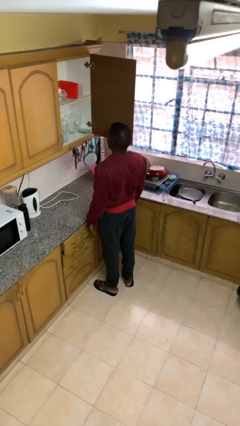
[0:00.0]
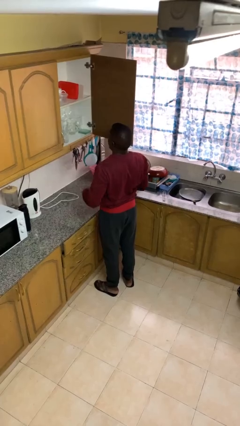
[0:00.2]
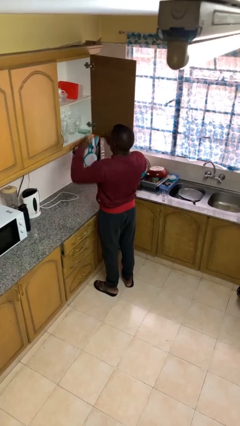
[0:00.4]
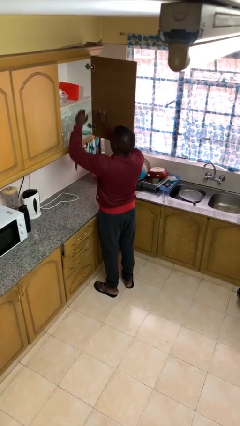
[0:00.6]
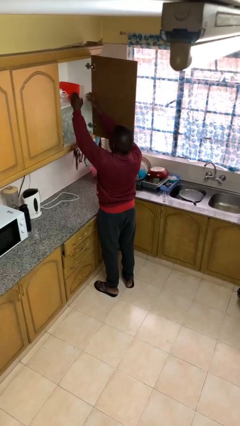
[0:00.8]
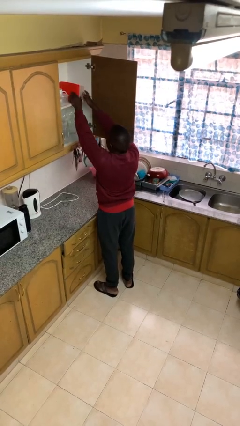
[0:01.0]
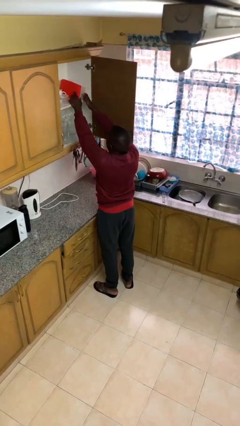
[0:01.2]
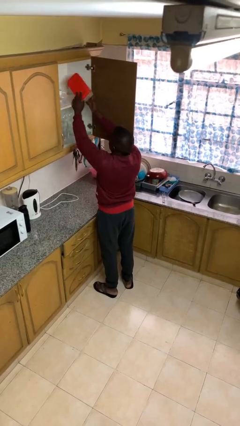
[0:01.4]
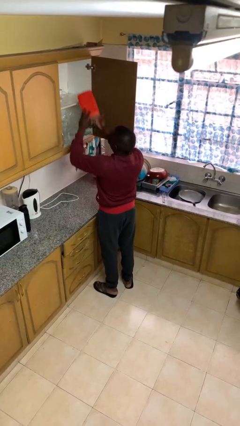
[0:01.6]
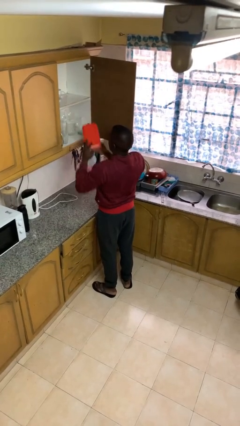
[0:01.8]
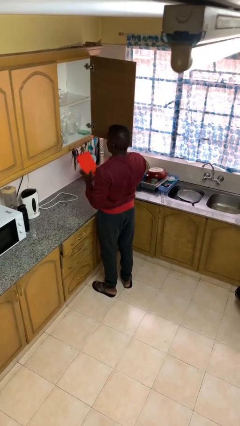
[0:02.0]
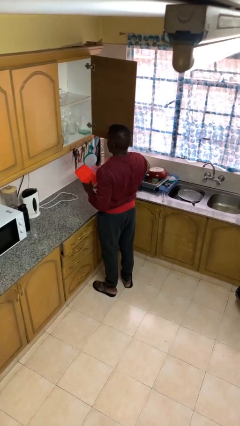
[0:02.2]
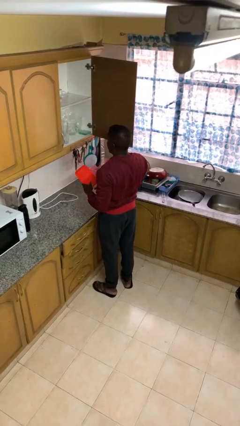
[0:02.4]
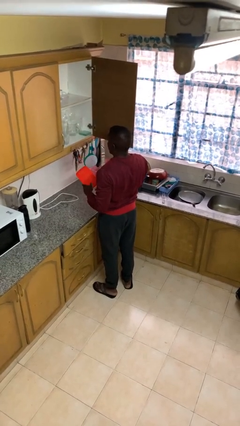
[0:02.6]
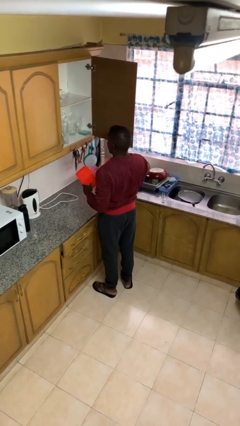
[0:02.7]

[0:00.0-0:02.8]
person picks up object from cabinet

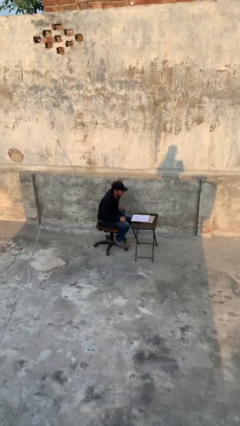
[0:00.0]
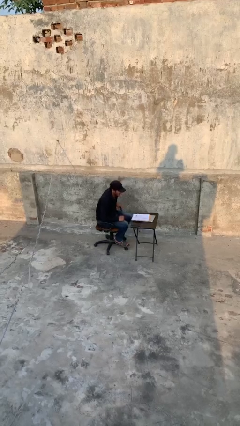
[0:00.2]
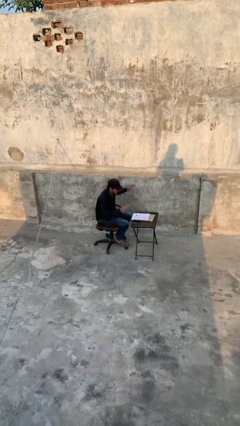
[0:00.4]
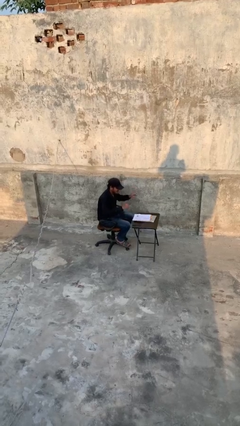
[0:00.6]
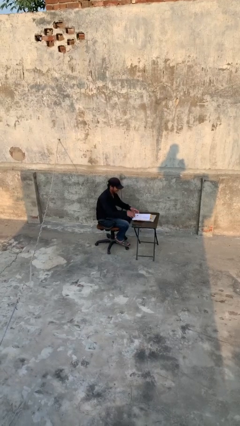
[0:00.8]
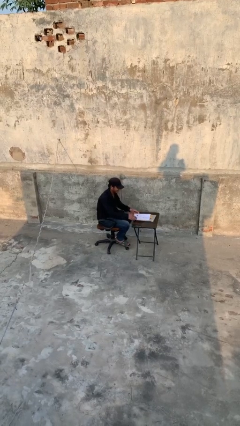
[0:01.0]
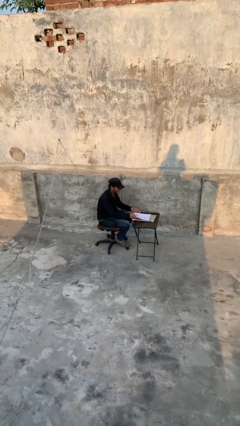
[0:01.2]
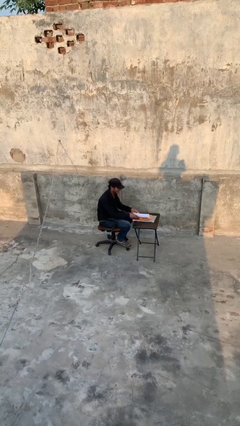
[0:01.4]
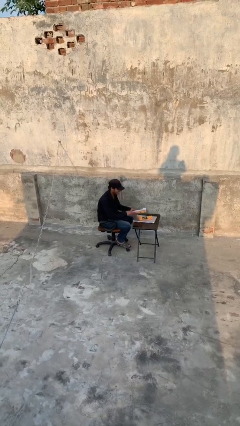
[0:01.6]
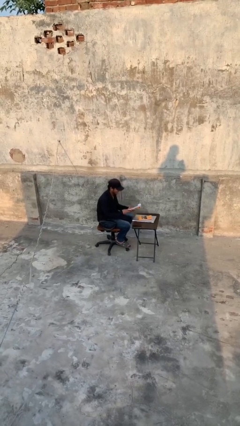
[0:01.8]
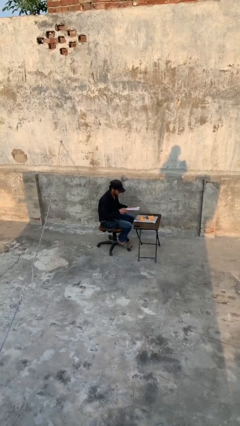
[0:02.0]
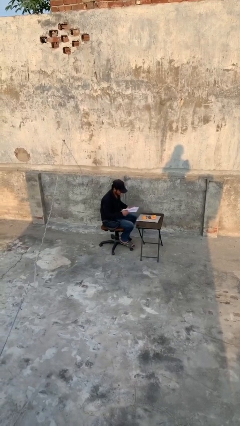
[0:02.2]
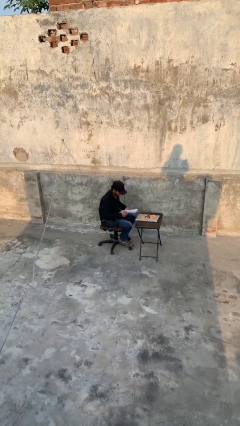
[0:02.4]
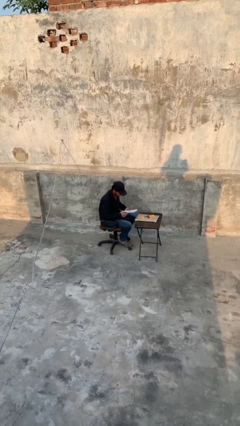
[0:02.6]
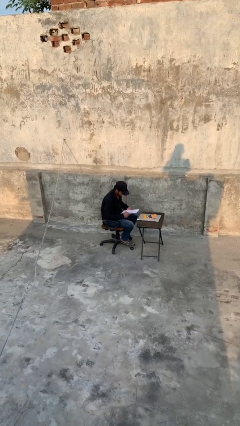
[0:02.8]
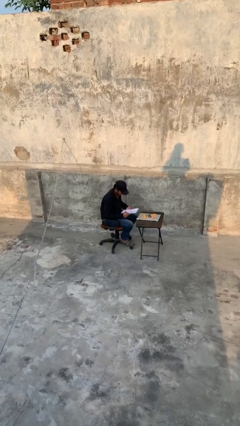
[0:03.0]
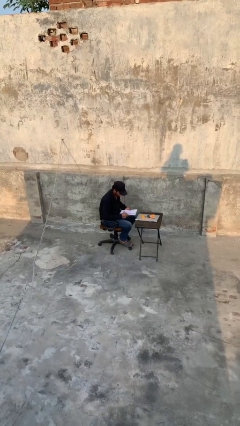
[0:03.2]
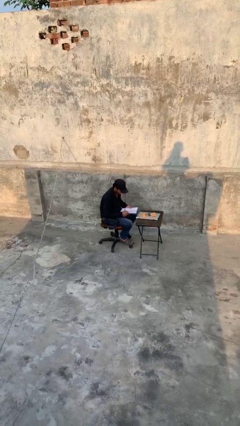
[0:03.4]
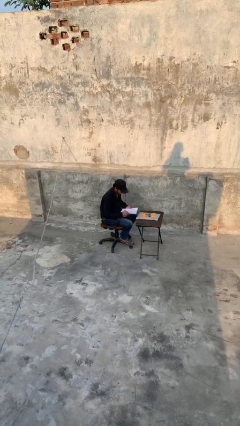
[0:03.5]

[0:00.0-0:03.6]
person picks up object from table

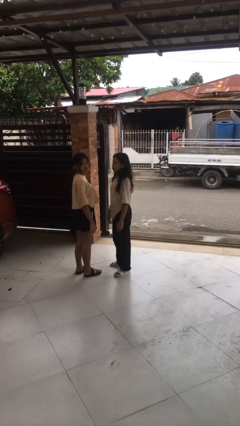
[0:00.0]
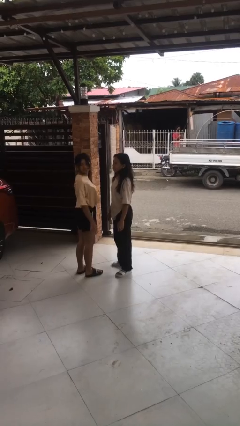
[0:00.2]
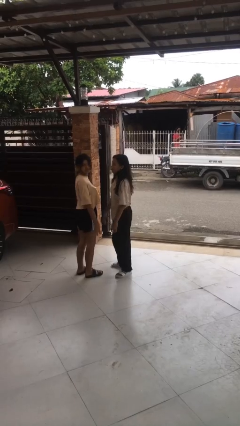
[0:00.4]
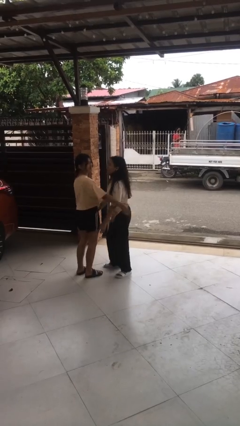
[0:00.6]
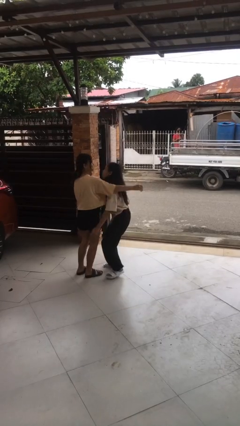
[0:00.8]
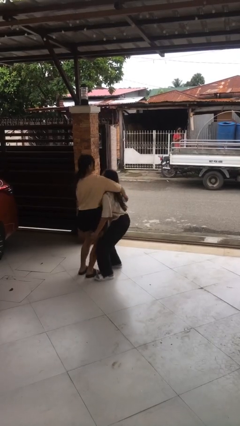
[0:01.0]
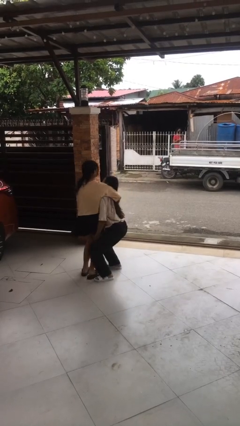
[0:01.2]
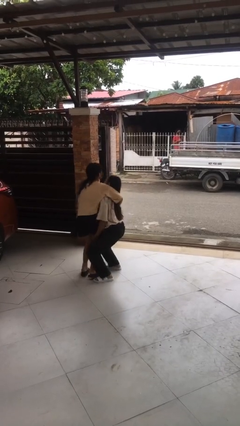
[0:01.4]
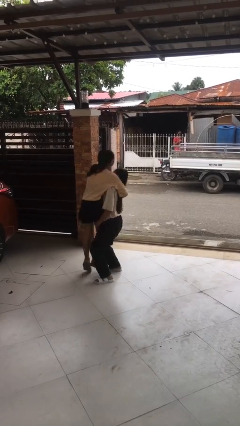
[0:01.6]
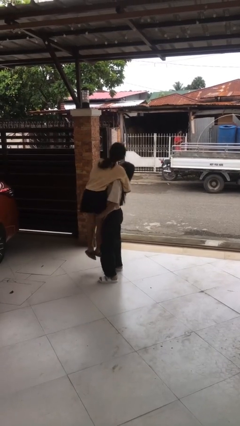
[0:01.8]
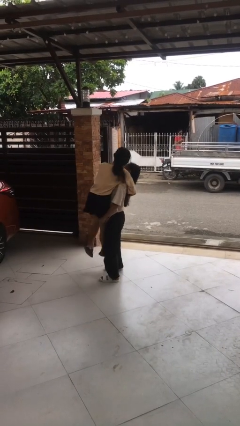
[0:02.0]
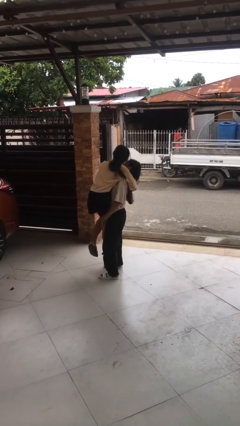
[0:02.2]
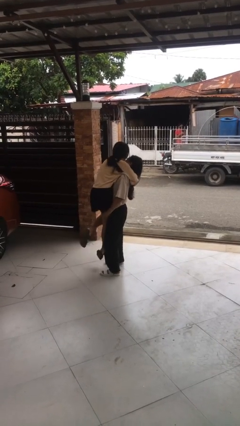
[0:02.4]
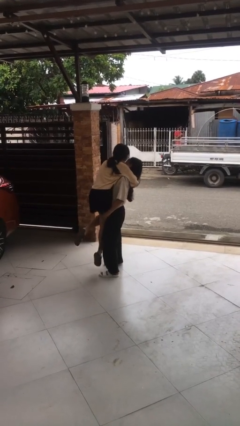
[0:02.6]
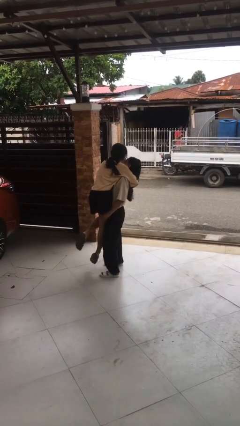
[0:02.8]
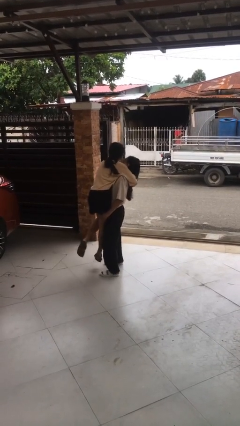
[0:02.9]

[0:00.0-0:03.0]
person picks up person

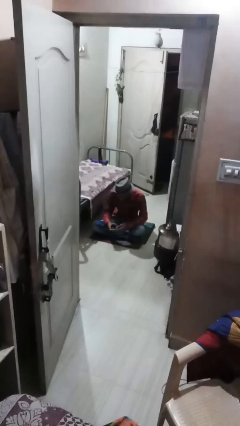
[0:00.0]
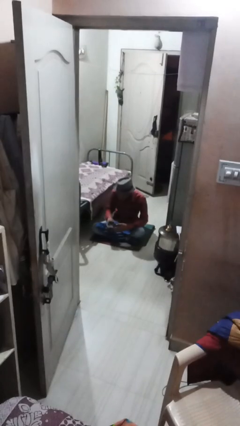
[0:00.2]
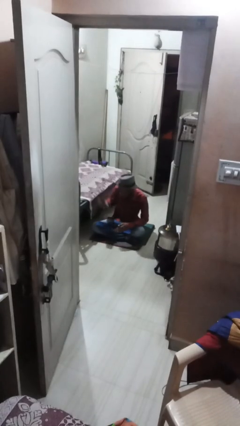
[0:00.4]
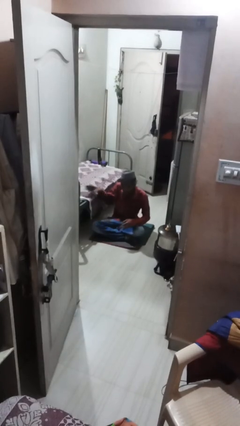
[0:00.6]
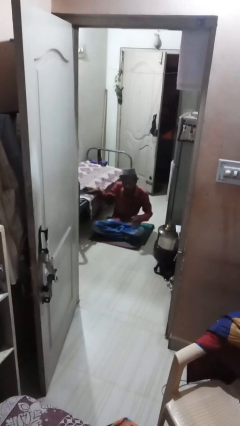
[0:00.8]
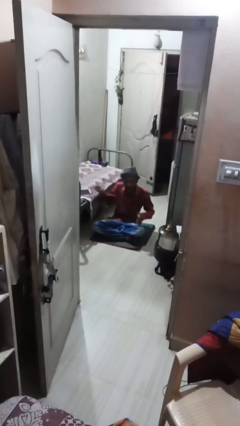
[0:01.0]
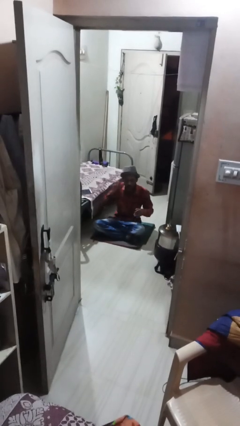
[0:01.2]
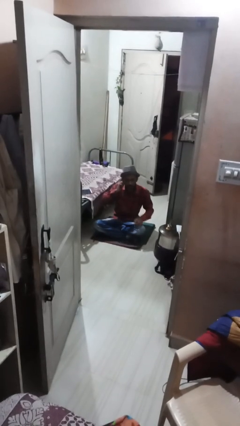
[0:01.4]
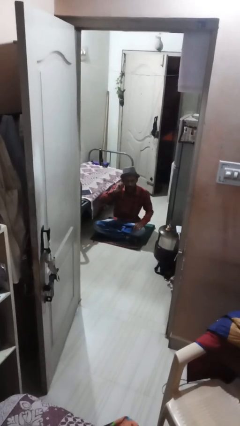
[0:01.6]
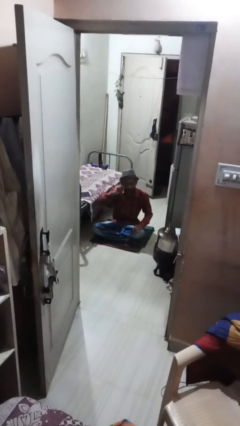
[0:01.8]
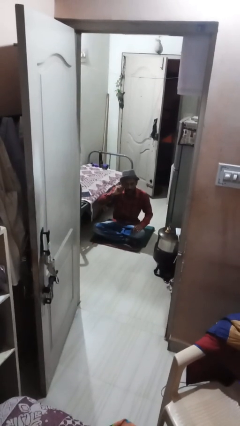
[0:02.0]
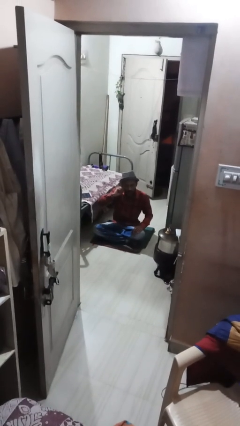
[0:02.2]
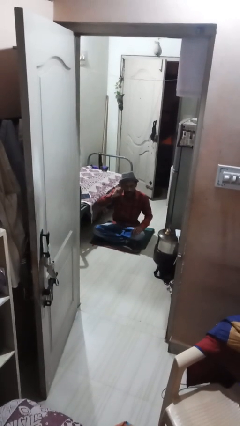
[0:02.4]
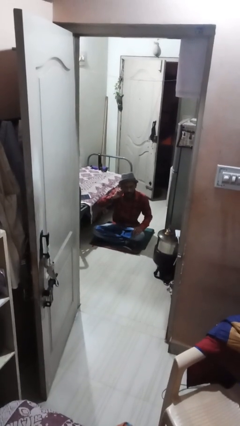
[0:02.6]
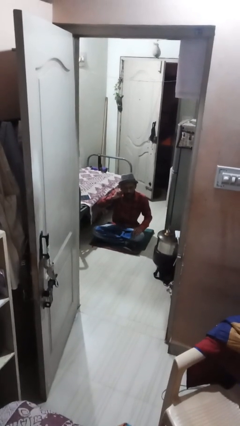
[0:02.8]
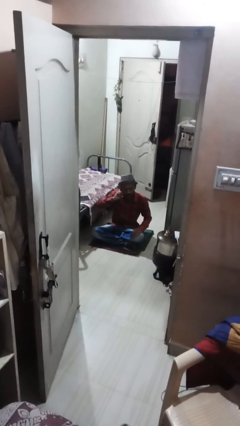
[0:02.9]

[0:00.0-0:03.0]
person touches earlobe

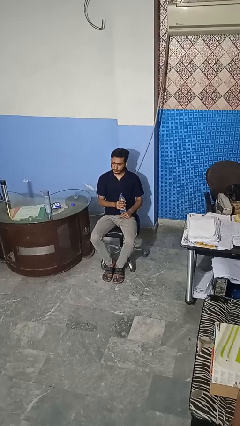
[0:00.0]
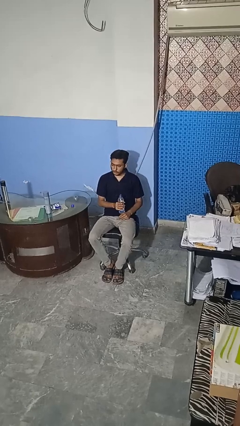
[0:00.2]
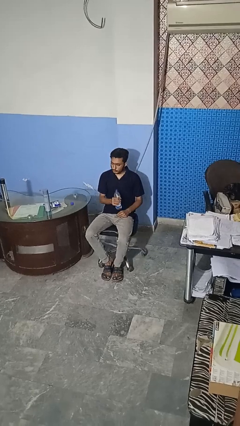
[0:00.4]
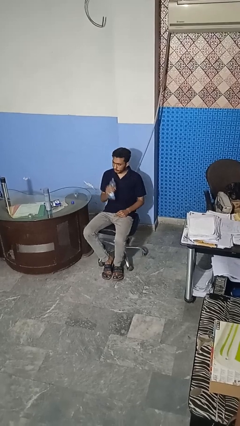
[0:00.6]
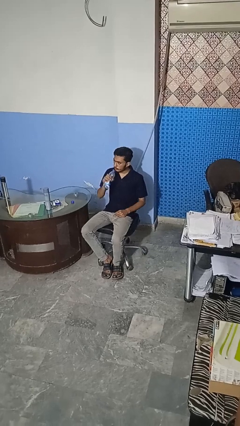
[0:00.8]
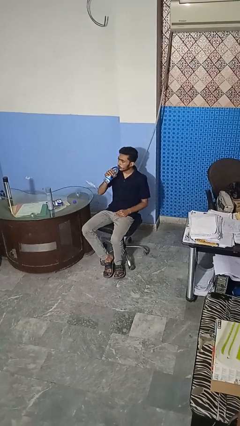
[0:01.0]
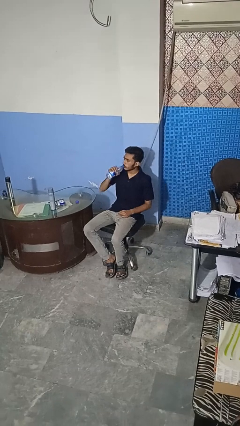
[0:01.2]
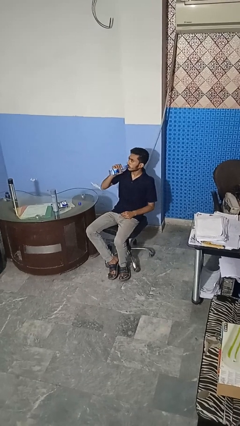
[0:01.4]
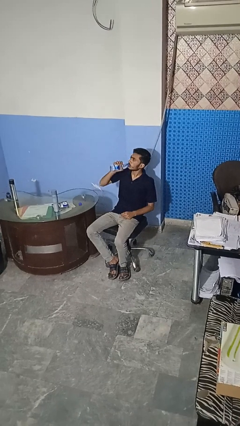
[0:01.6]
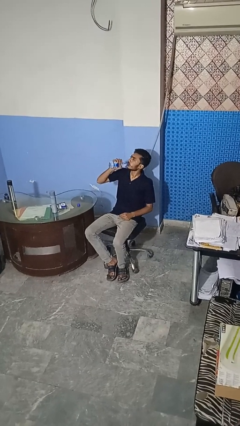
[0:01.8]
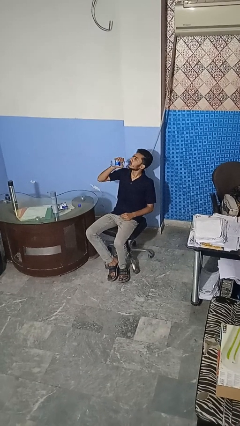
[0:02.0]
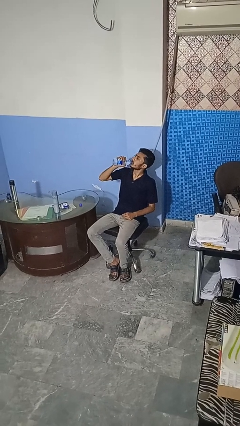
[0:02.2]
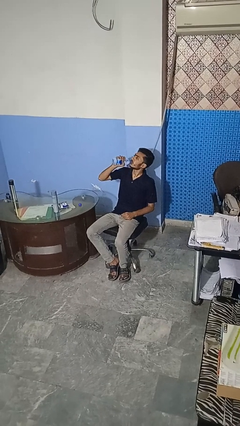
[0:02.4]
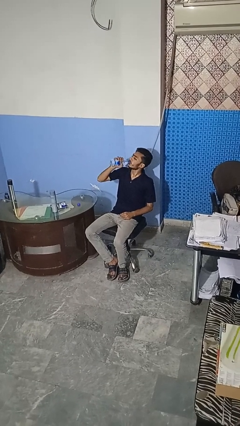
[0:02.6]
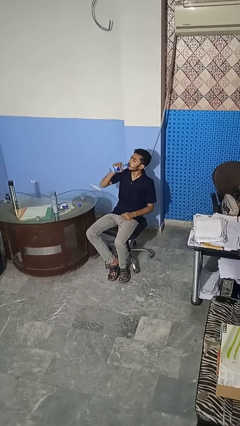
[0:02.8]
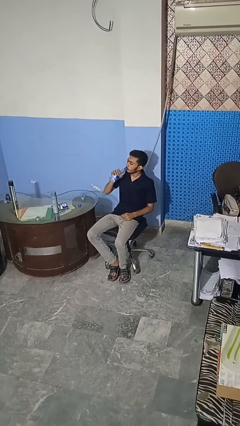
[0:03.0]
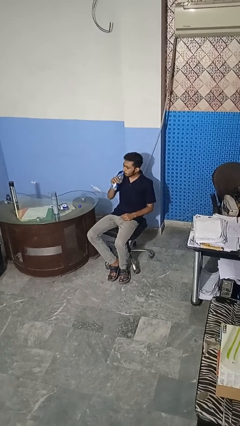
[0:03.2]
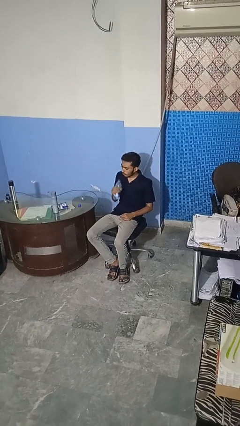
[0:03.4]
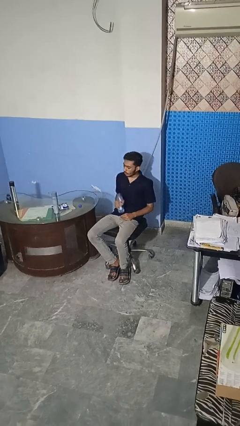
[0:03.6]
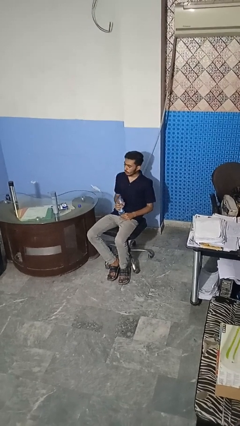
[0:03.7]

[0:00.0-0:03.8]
person drinks from bottle

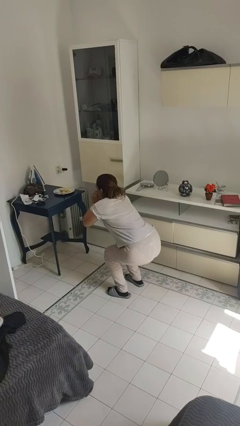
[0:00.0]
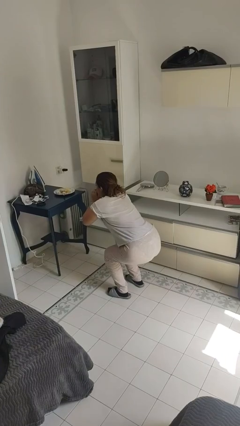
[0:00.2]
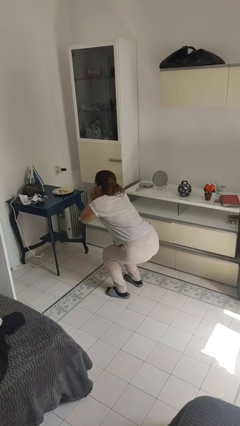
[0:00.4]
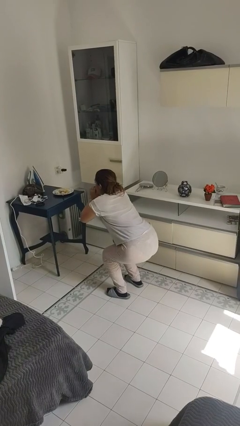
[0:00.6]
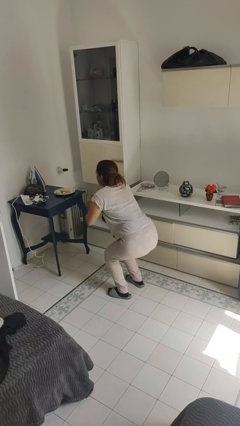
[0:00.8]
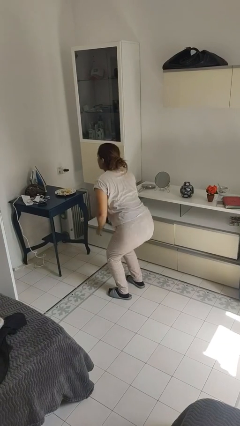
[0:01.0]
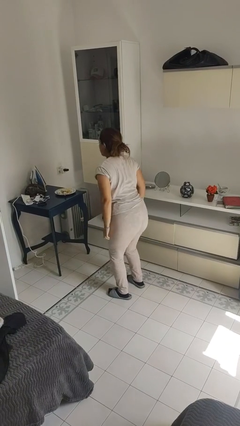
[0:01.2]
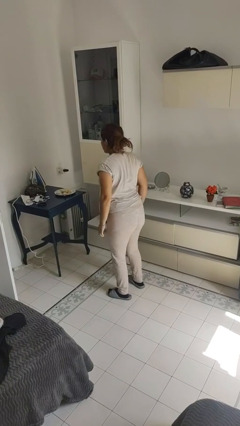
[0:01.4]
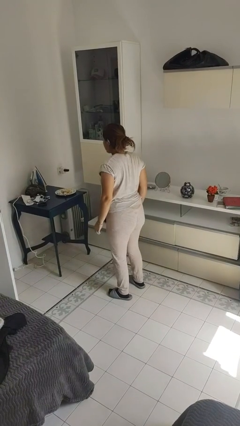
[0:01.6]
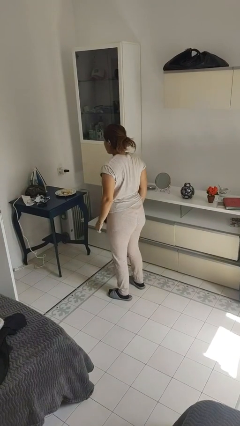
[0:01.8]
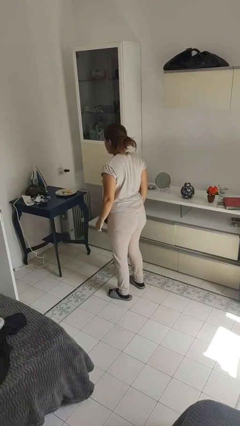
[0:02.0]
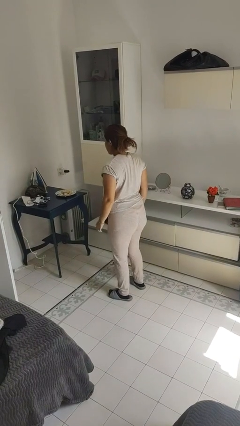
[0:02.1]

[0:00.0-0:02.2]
person stands up
